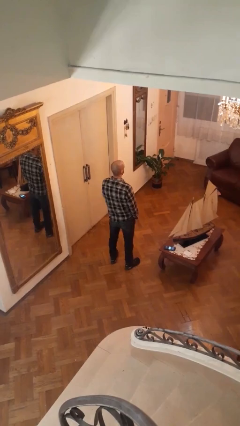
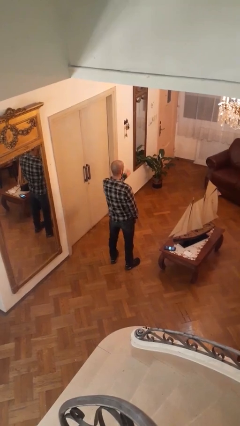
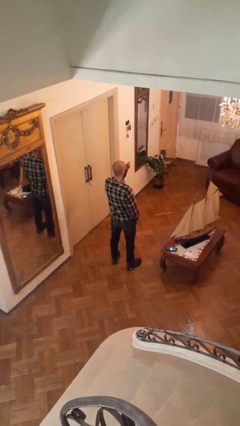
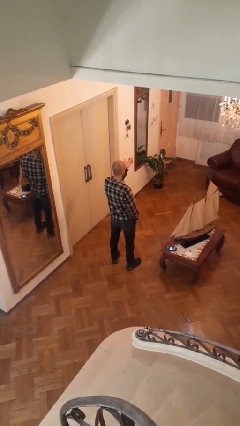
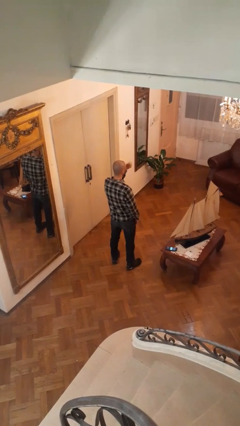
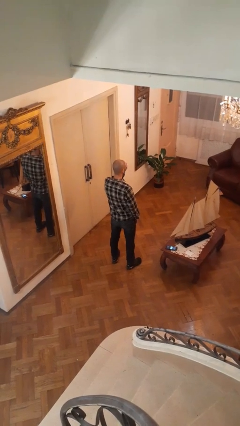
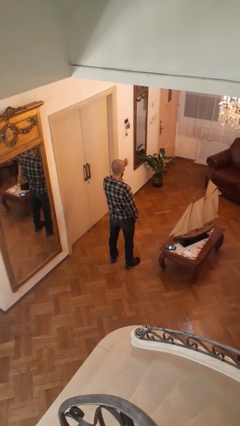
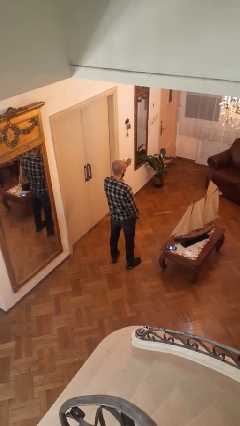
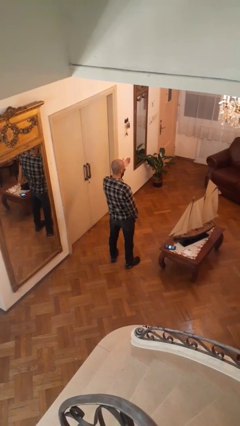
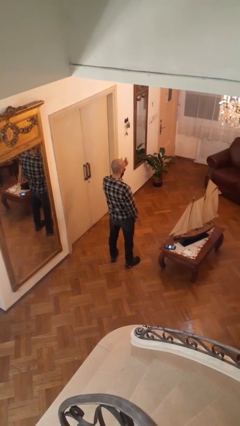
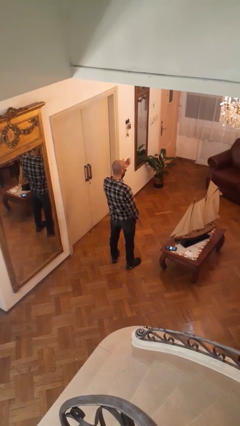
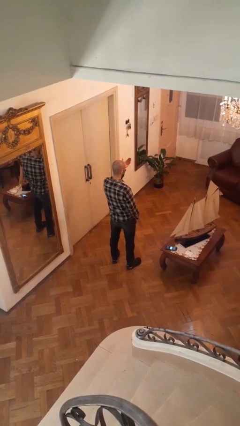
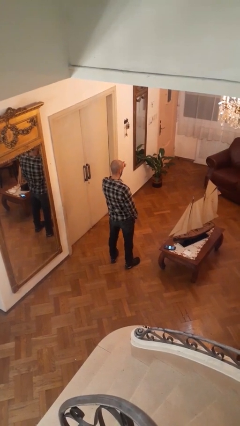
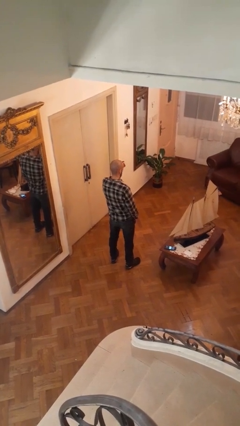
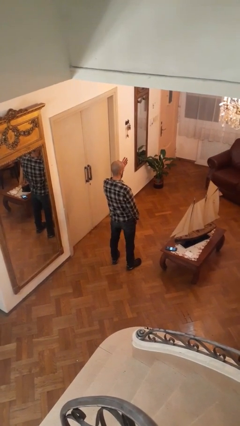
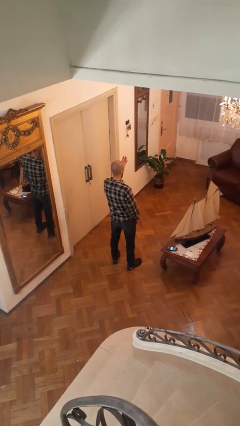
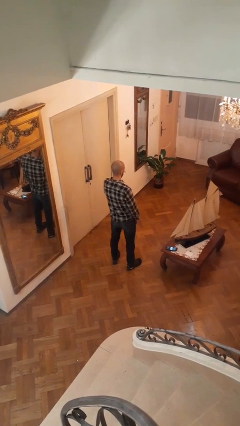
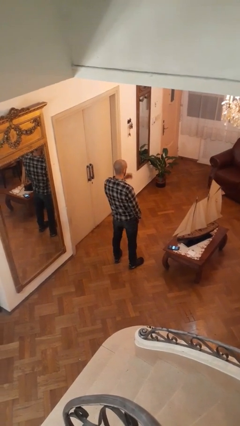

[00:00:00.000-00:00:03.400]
person gestures come here

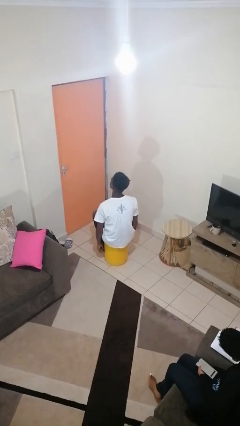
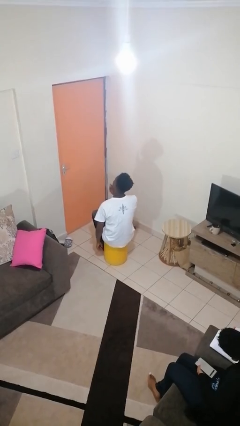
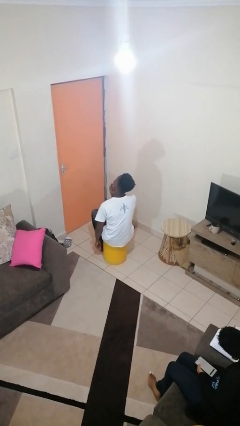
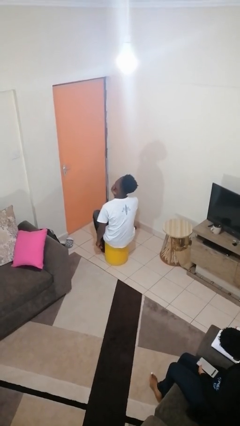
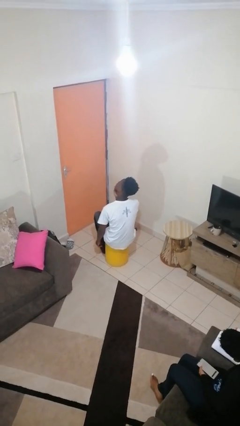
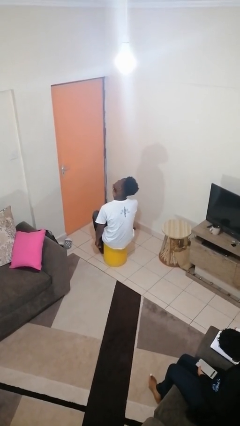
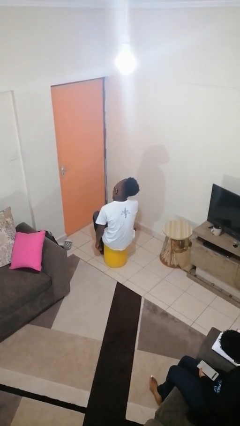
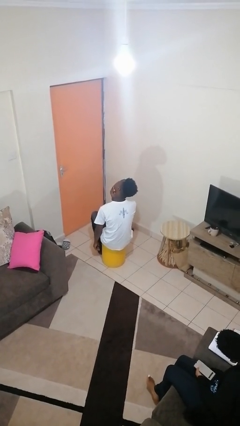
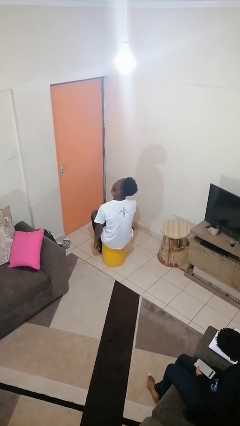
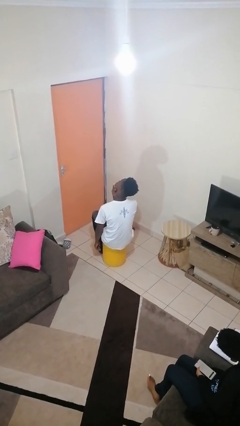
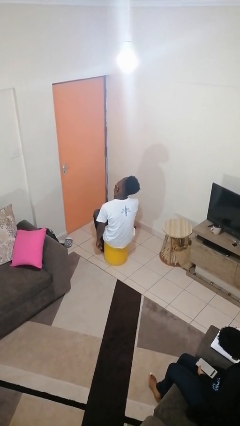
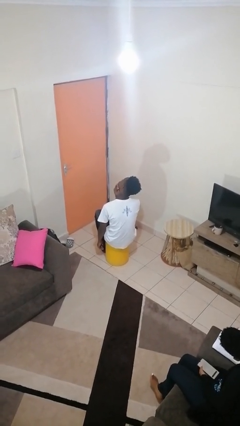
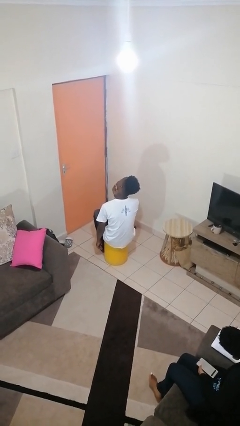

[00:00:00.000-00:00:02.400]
person strokes chin

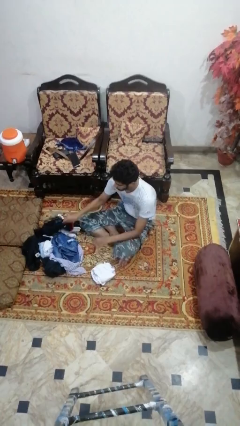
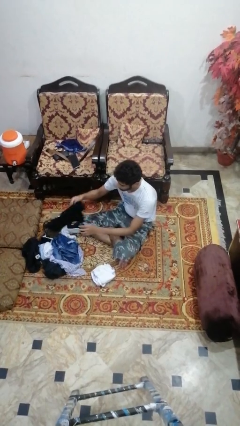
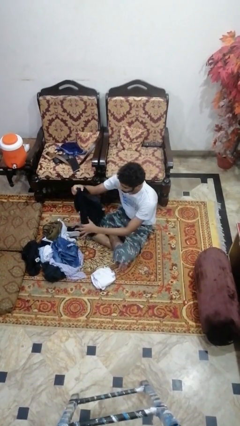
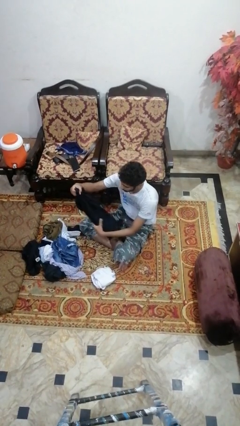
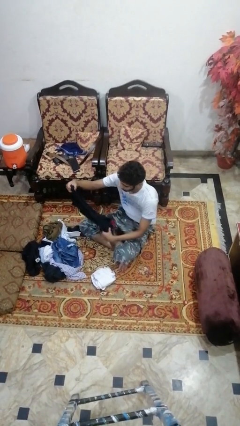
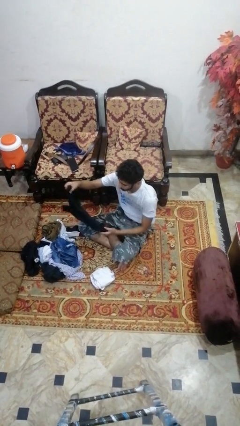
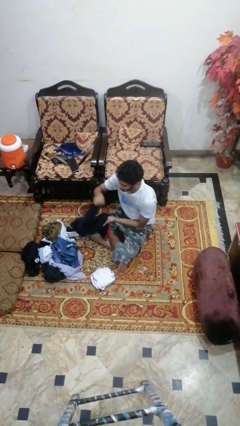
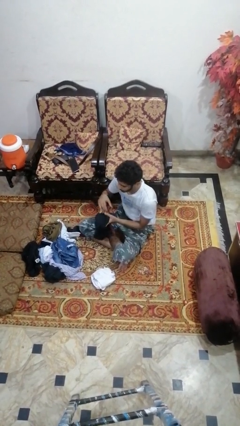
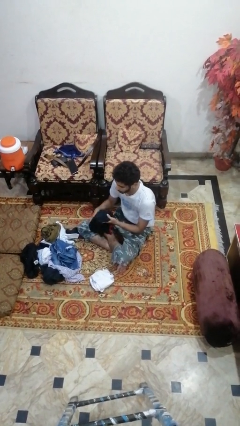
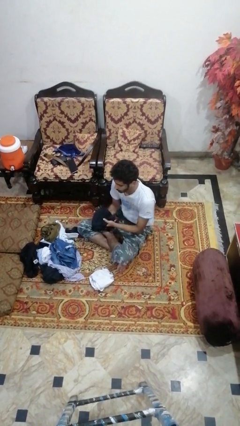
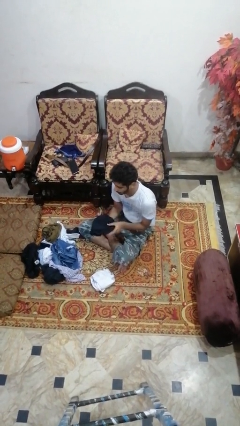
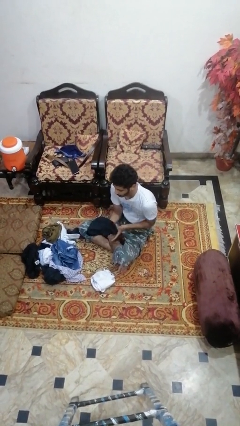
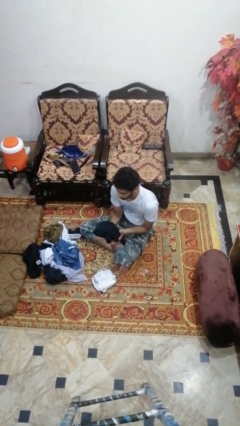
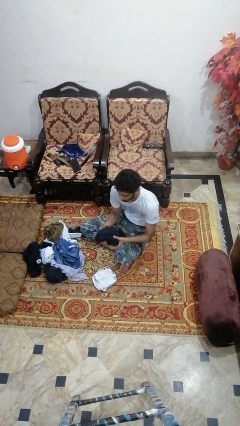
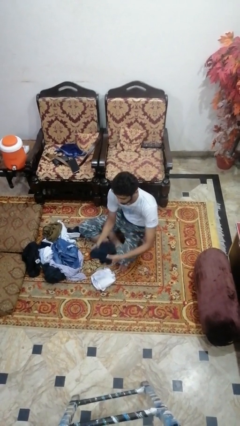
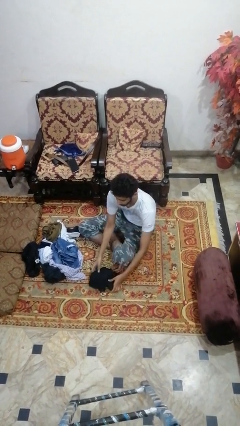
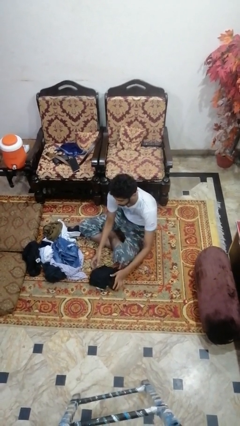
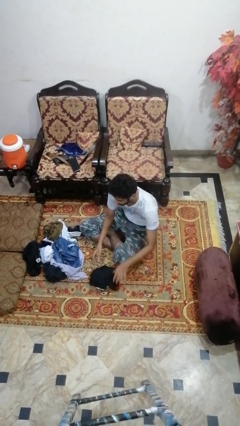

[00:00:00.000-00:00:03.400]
person folds shirt

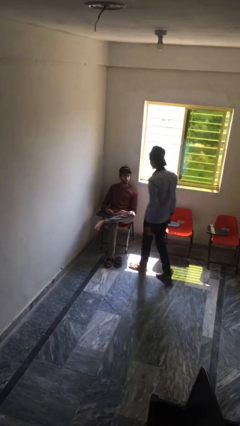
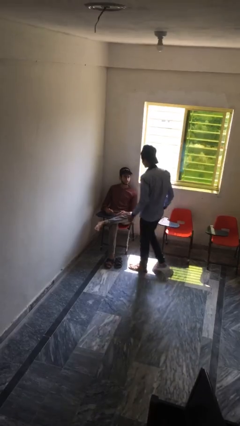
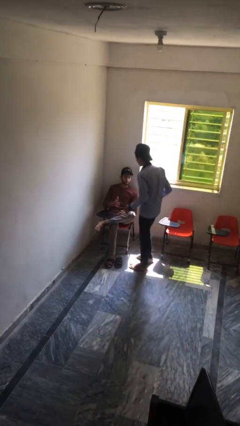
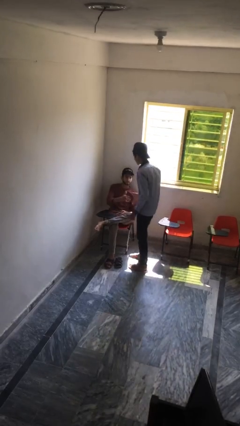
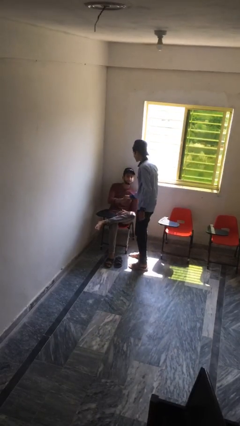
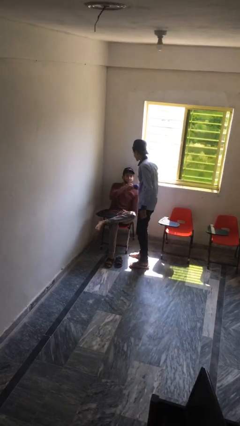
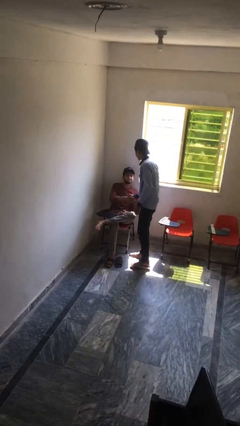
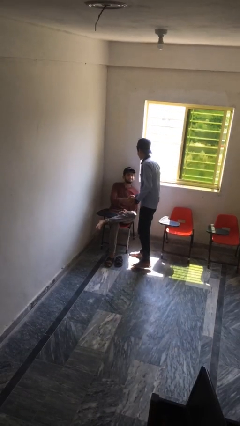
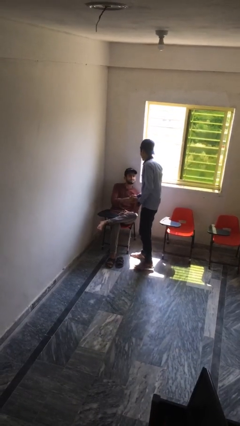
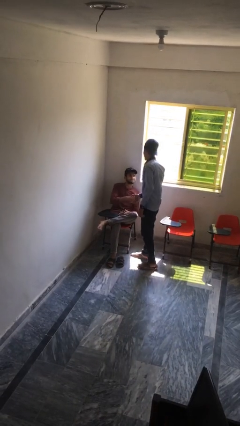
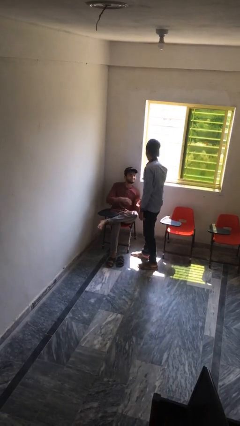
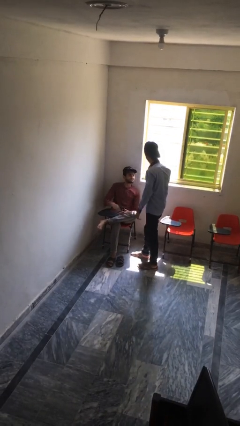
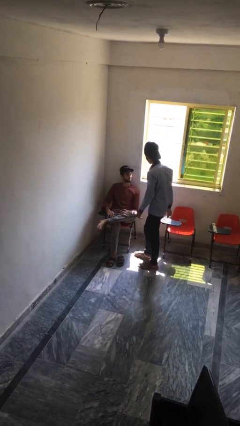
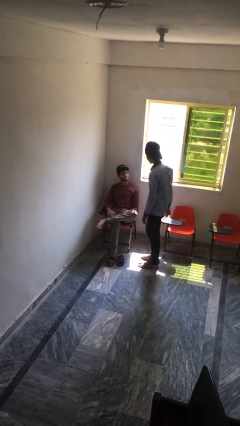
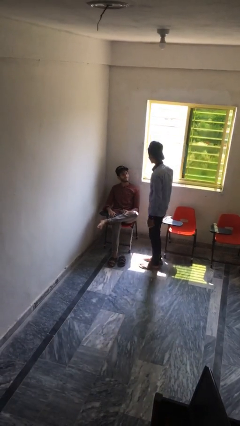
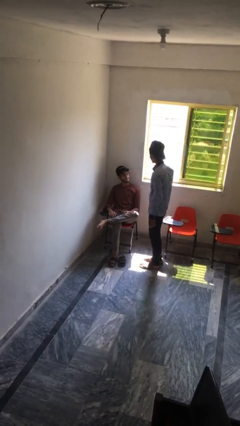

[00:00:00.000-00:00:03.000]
person shakes hand

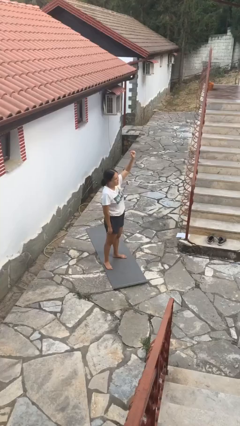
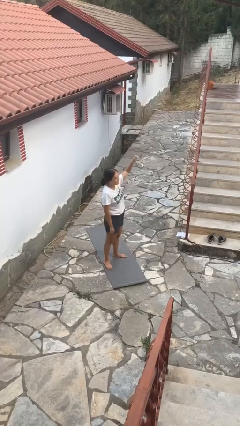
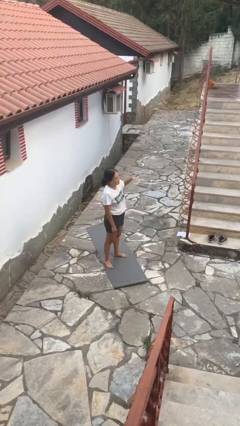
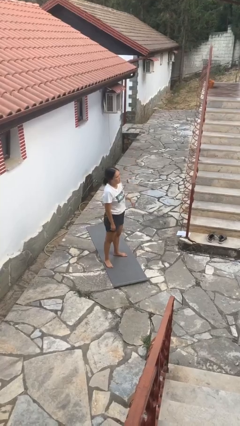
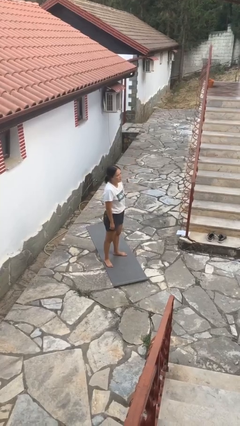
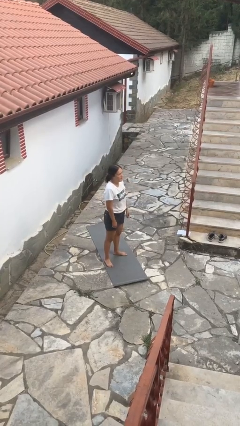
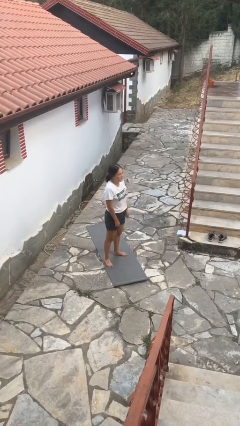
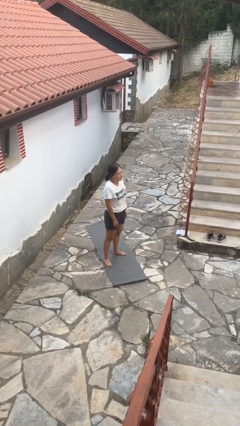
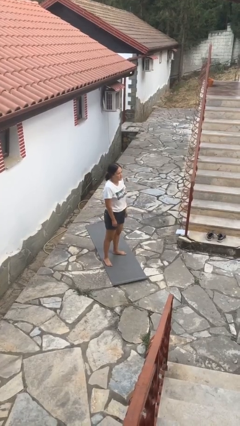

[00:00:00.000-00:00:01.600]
person gestures lower hand

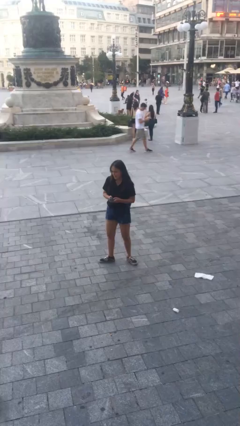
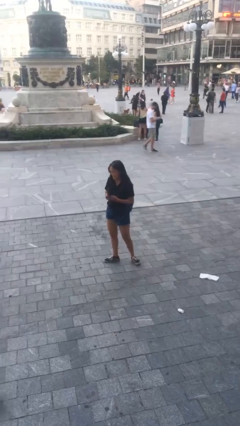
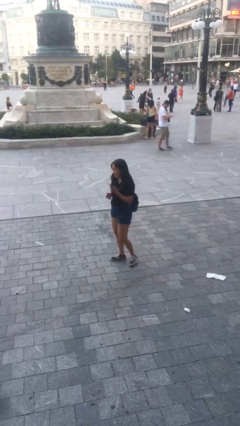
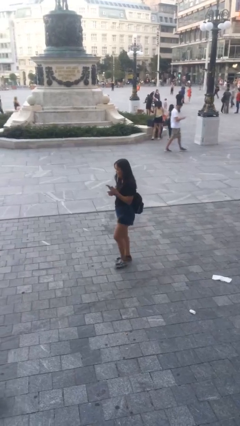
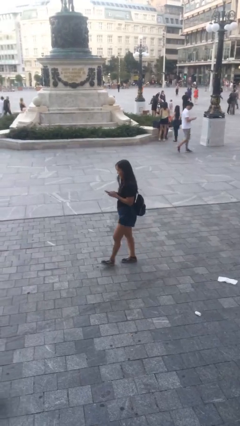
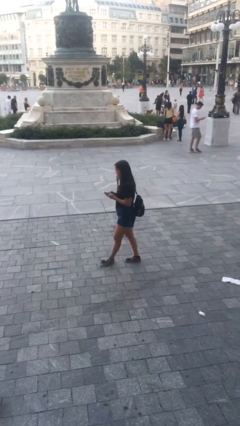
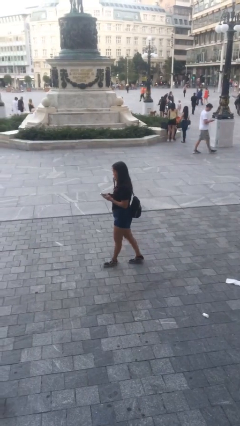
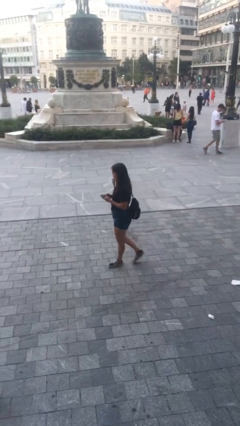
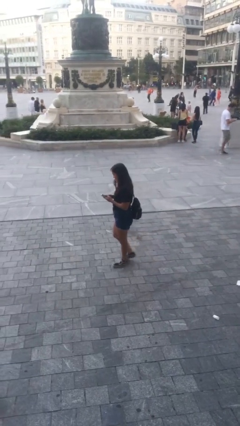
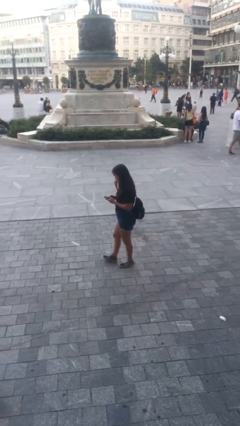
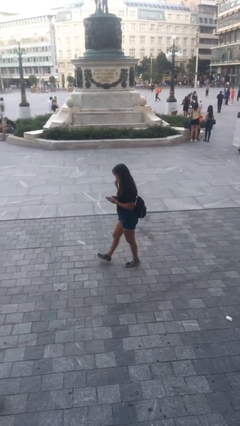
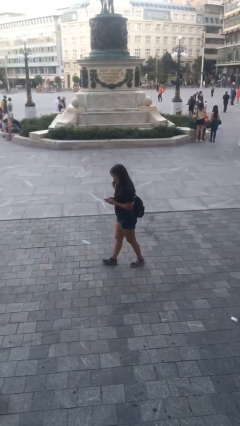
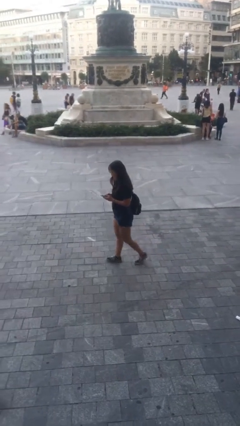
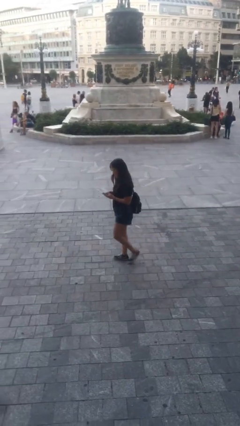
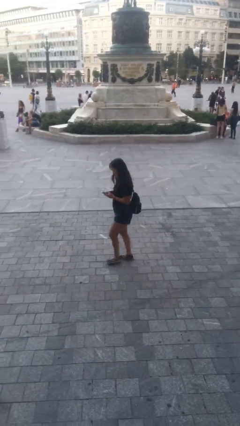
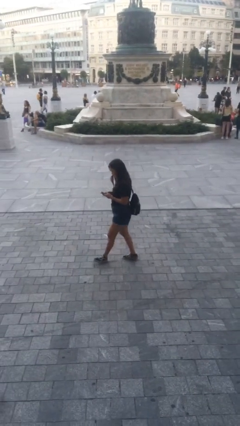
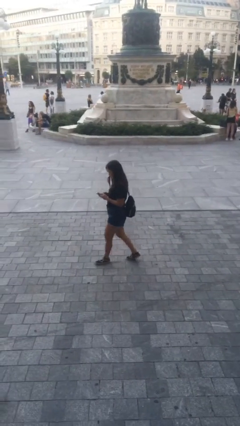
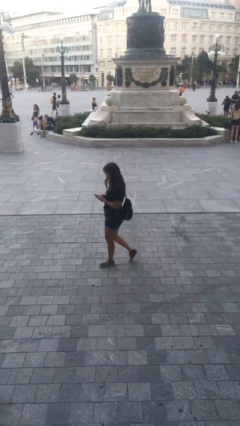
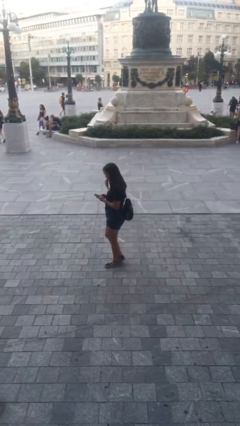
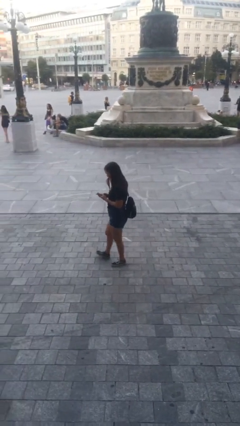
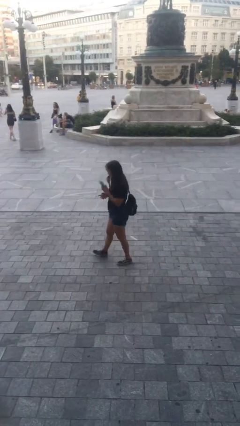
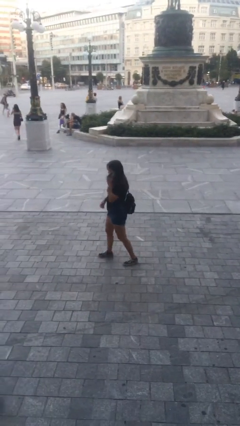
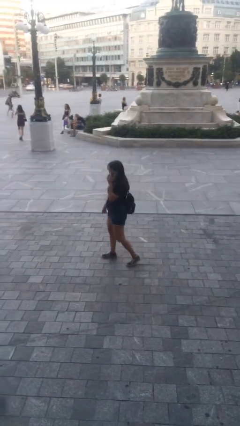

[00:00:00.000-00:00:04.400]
person texts on phone
